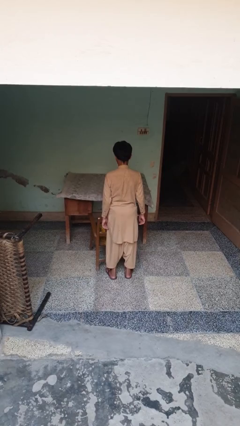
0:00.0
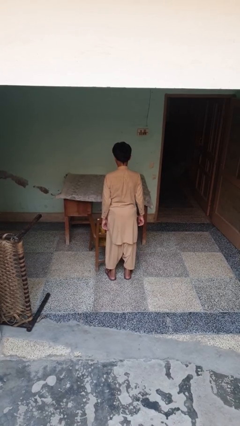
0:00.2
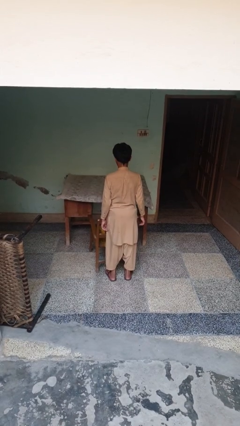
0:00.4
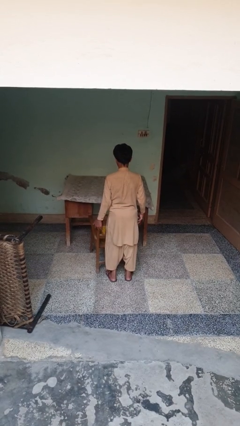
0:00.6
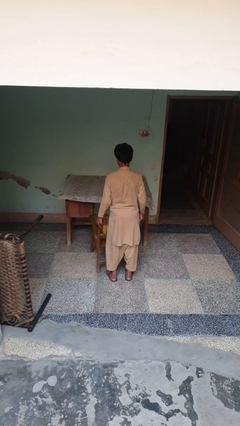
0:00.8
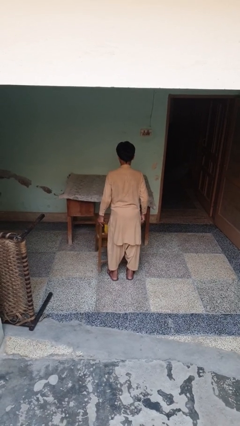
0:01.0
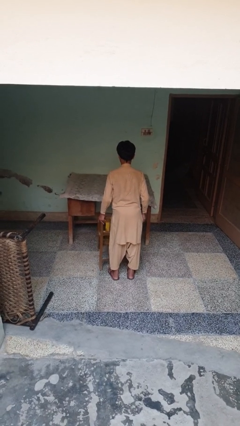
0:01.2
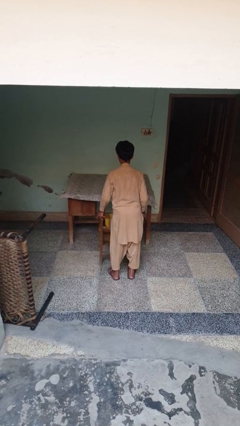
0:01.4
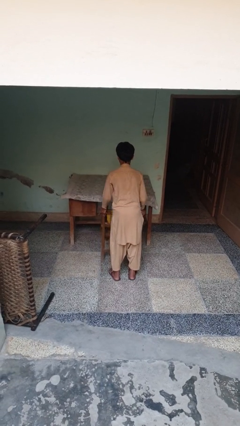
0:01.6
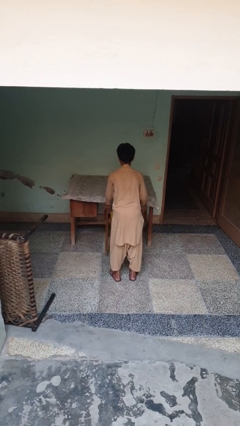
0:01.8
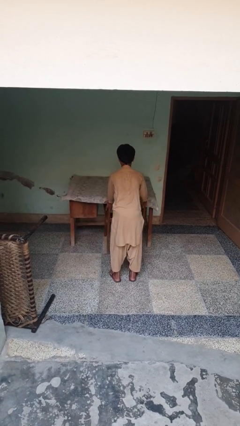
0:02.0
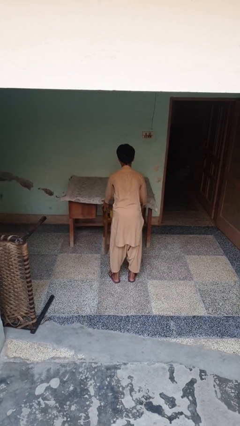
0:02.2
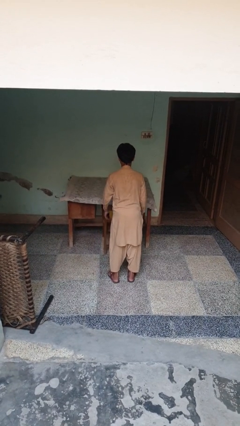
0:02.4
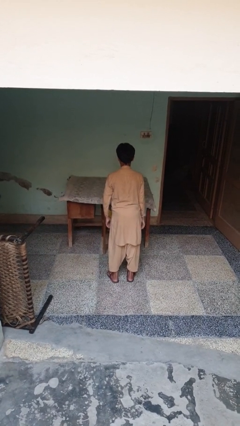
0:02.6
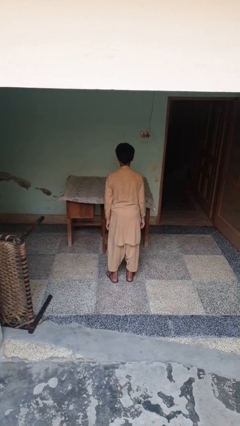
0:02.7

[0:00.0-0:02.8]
person pushes in chair

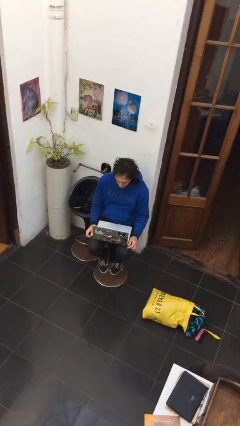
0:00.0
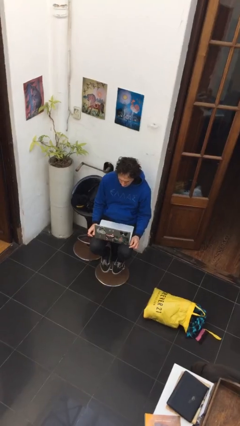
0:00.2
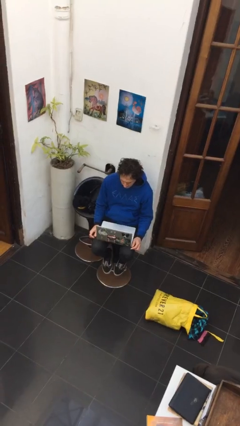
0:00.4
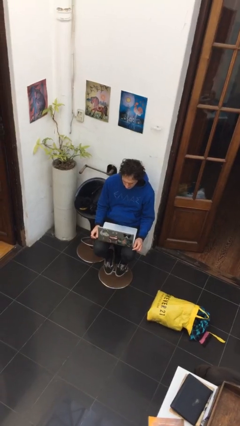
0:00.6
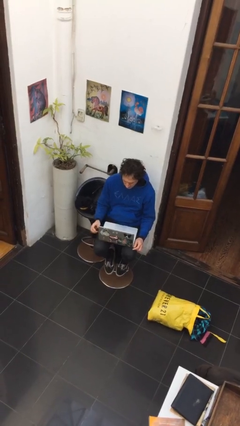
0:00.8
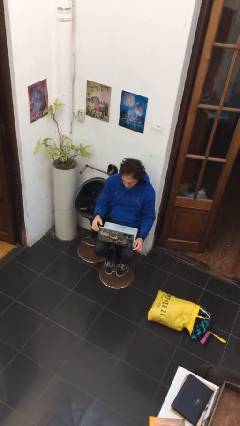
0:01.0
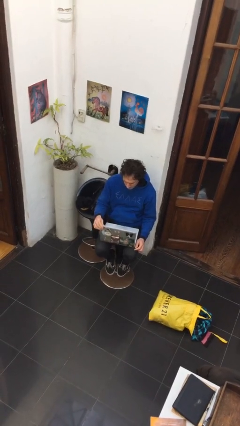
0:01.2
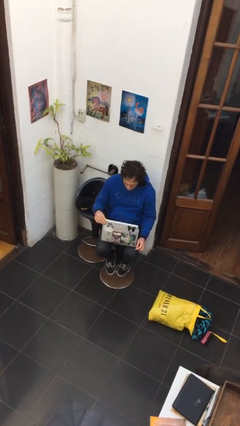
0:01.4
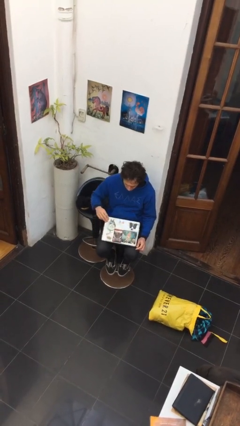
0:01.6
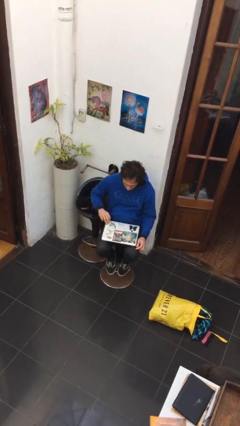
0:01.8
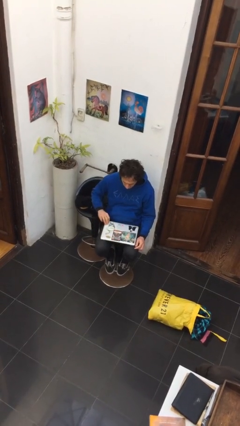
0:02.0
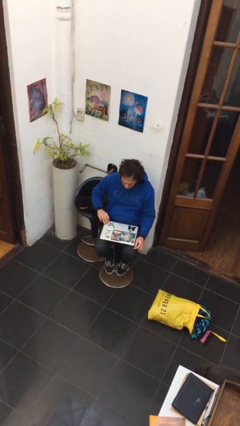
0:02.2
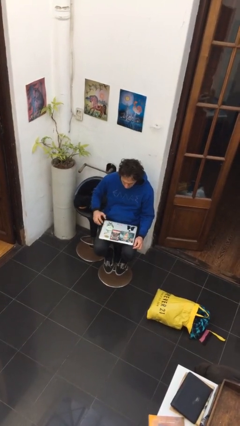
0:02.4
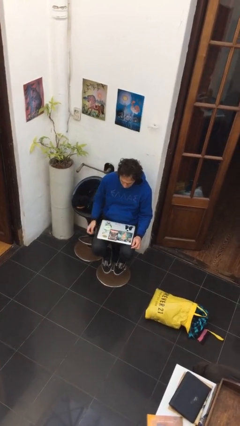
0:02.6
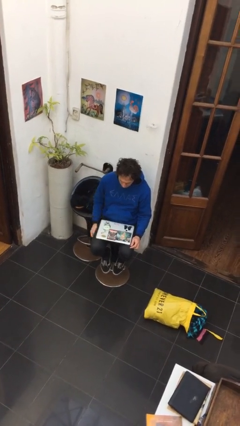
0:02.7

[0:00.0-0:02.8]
person closes laptop

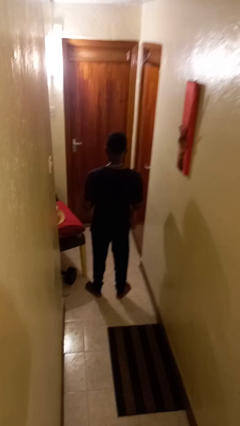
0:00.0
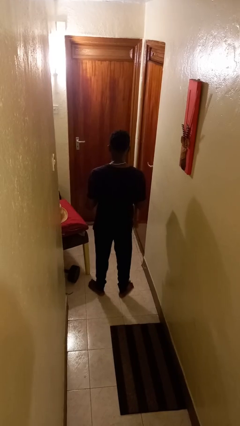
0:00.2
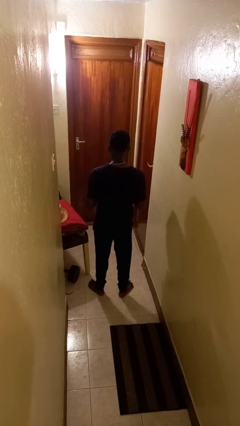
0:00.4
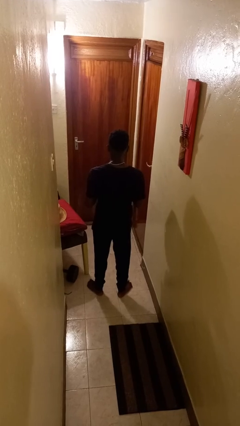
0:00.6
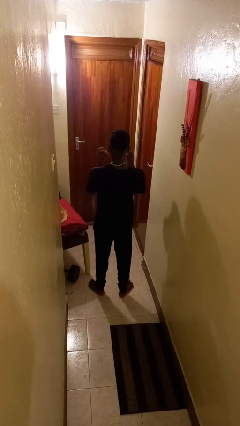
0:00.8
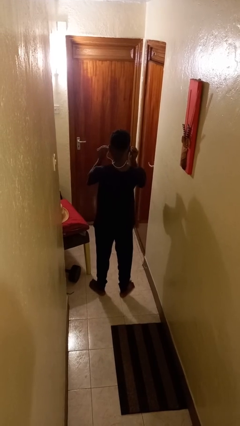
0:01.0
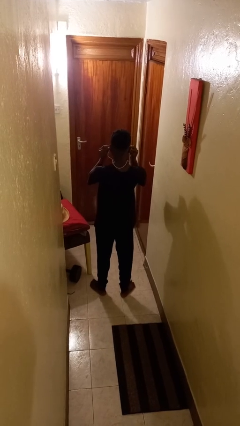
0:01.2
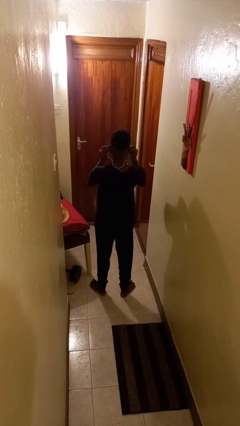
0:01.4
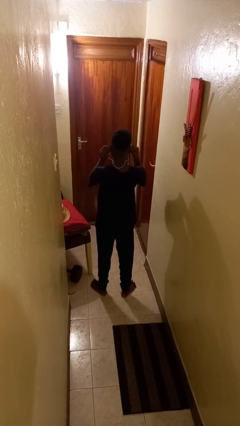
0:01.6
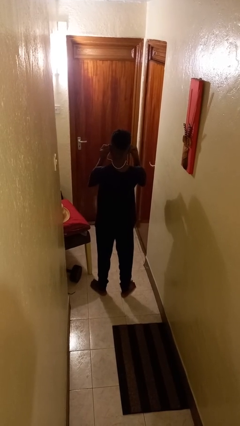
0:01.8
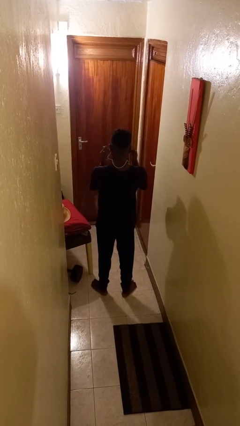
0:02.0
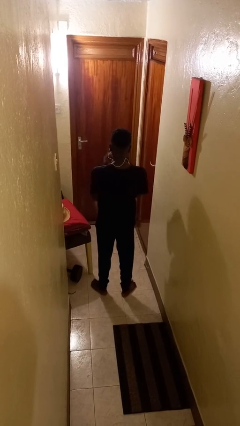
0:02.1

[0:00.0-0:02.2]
person puts on headphones

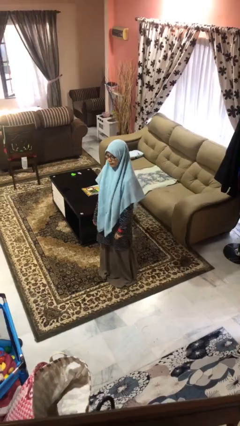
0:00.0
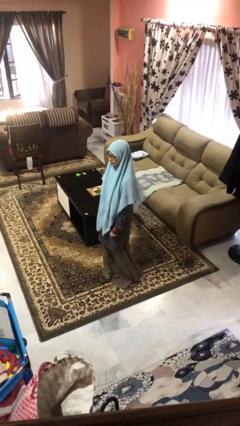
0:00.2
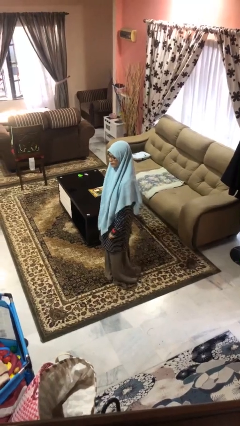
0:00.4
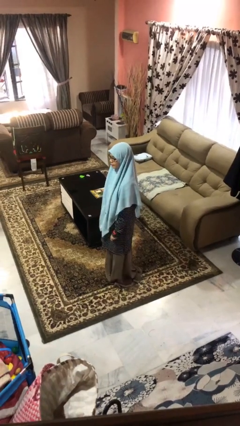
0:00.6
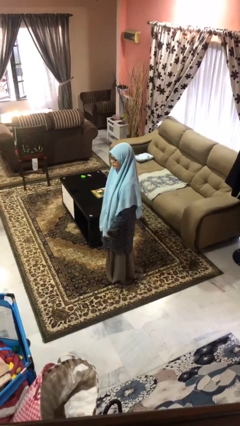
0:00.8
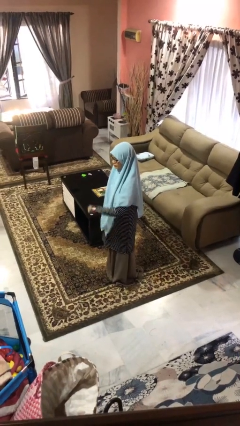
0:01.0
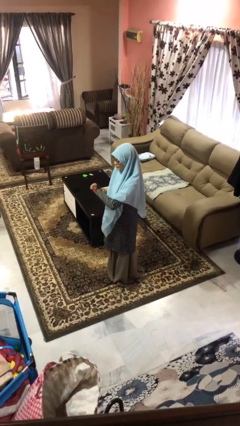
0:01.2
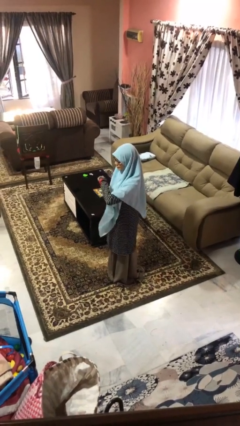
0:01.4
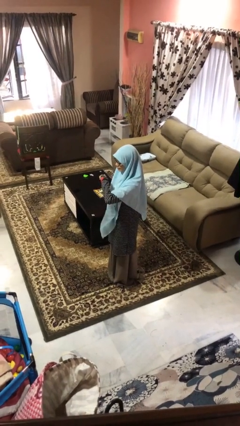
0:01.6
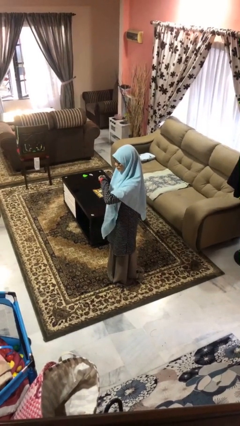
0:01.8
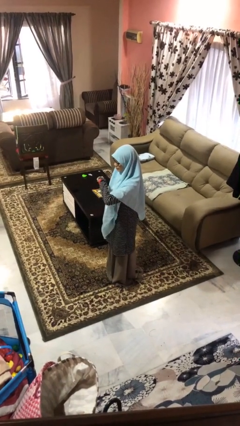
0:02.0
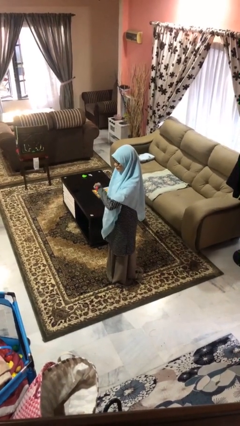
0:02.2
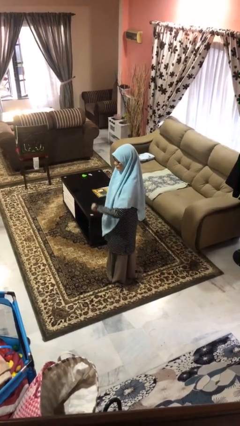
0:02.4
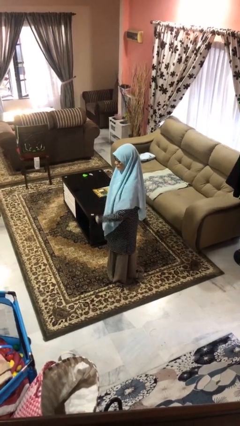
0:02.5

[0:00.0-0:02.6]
person looks at wristwatch

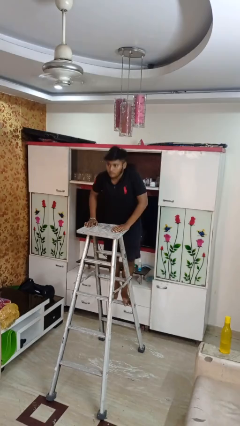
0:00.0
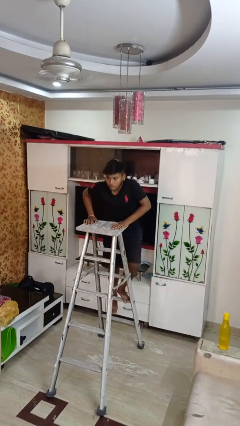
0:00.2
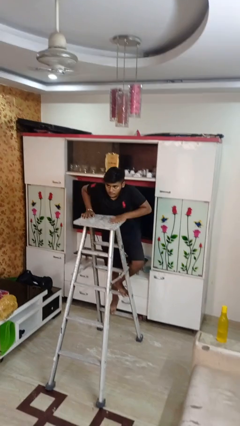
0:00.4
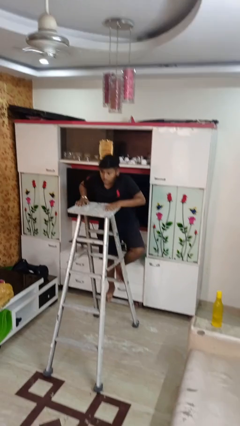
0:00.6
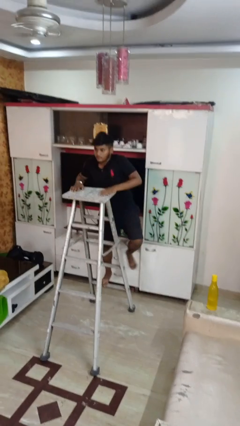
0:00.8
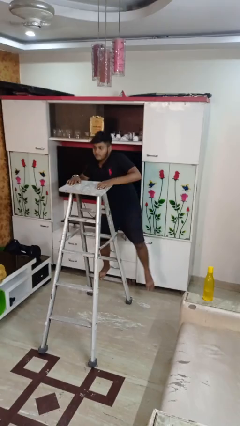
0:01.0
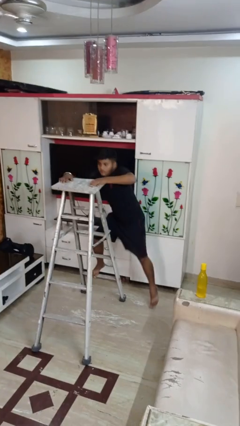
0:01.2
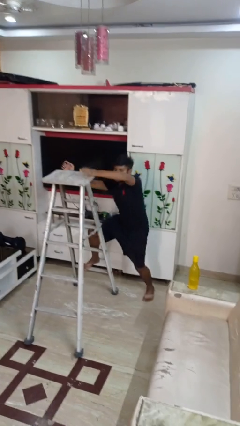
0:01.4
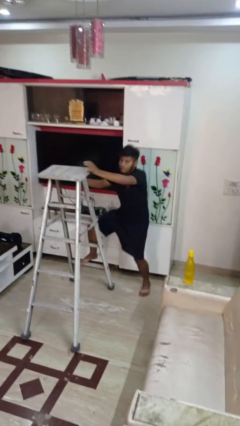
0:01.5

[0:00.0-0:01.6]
person climbs down ladder

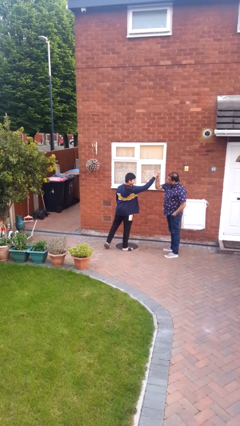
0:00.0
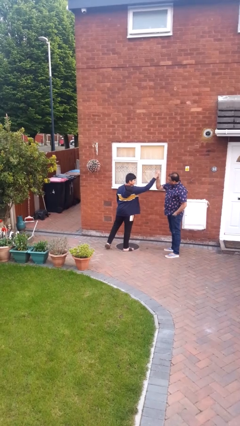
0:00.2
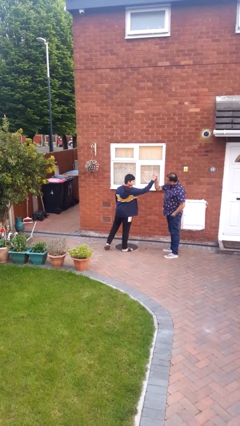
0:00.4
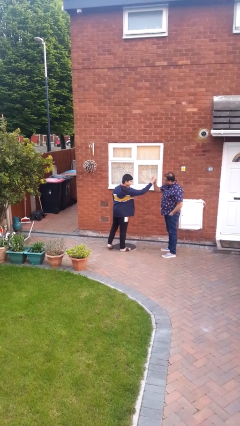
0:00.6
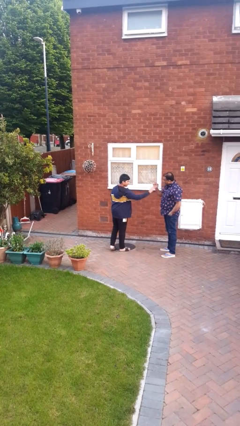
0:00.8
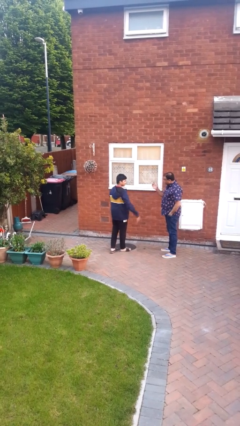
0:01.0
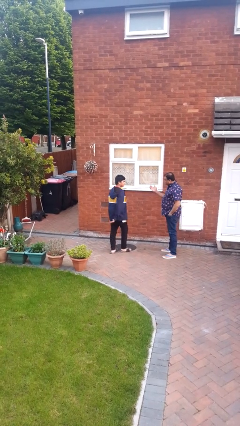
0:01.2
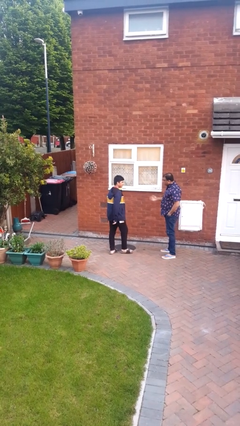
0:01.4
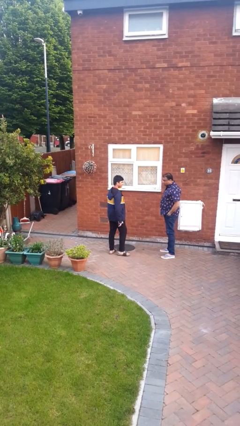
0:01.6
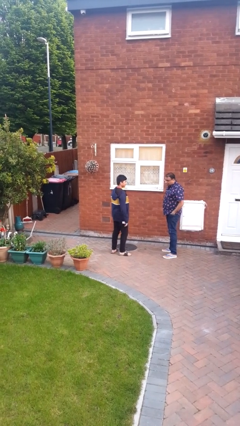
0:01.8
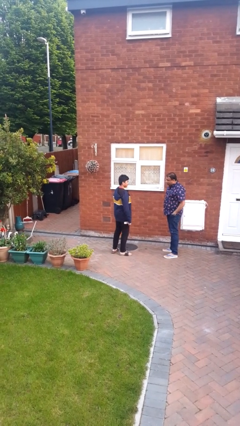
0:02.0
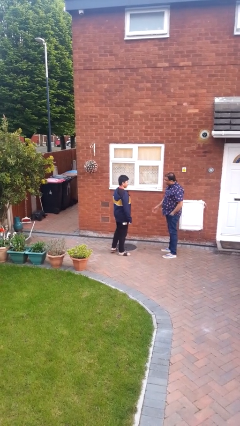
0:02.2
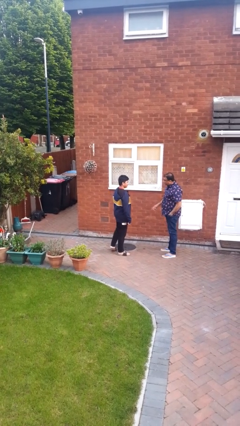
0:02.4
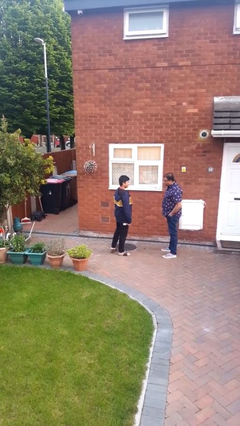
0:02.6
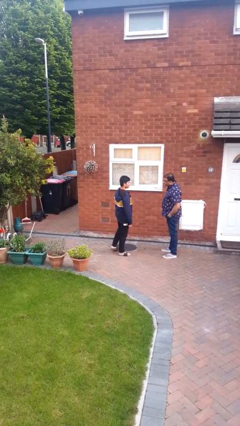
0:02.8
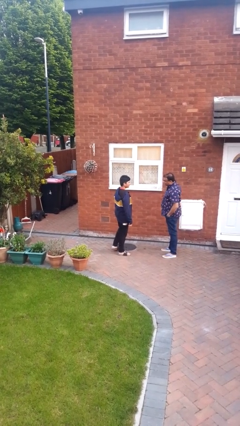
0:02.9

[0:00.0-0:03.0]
person highfives hand

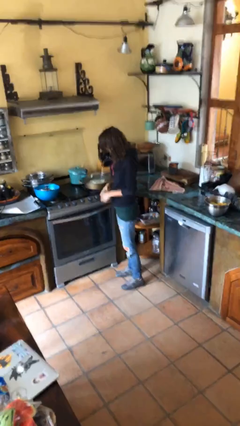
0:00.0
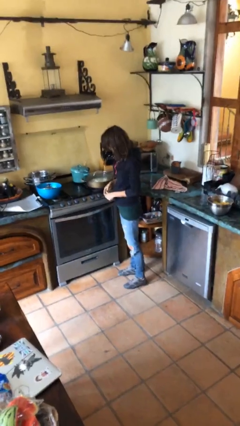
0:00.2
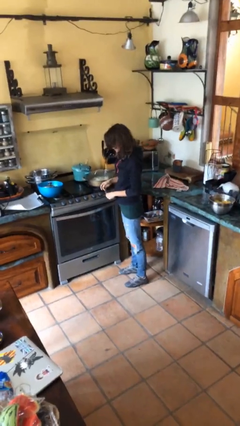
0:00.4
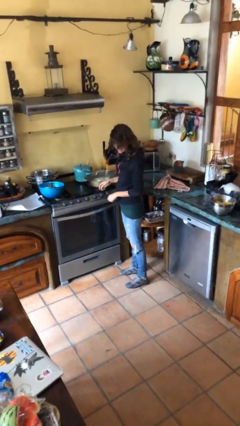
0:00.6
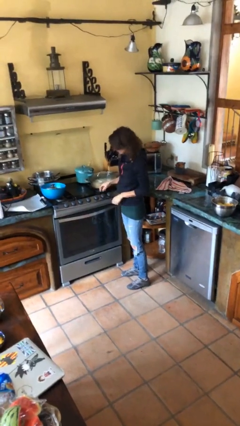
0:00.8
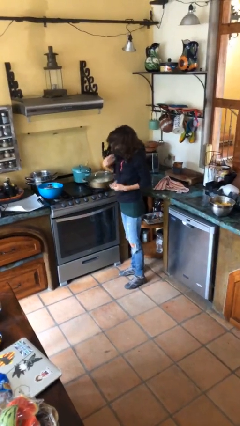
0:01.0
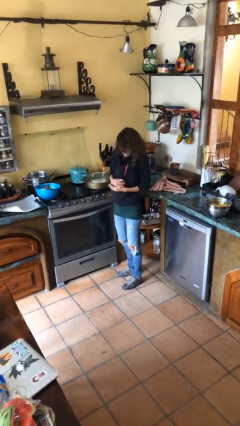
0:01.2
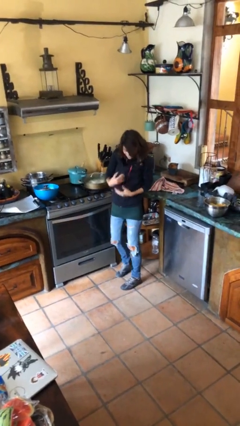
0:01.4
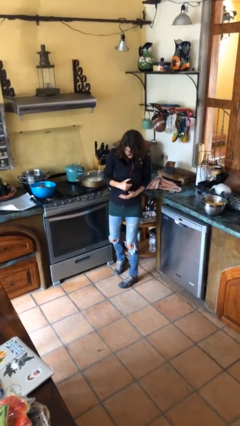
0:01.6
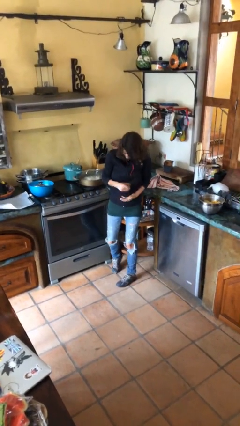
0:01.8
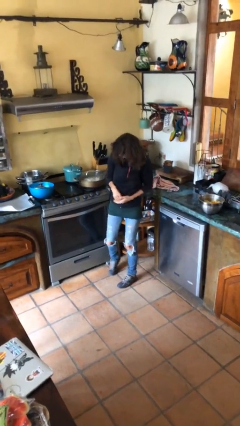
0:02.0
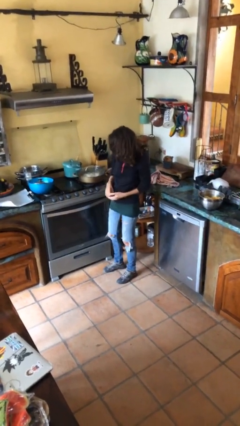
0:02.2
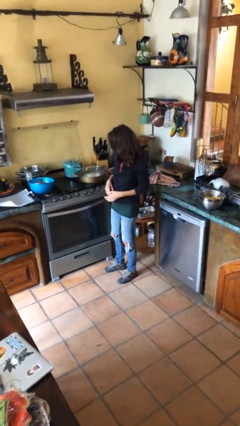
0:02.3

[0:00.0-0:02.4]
person burns hand
